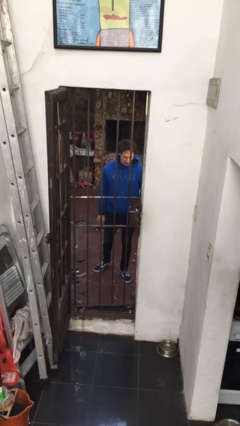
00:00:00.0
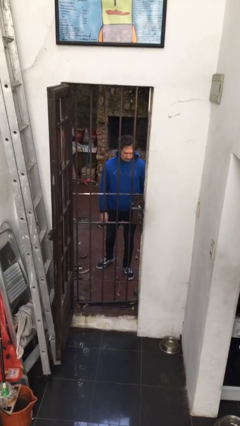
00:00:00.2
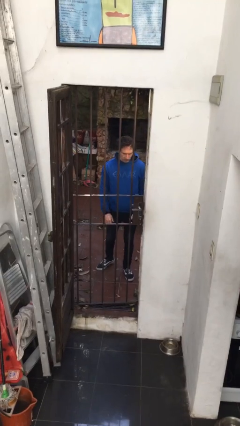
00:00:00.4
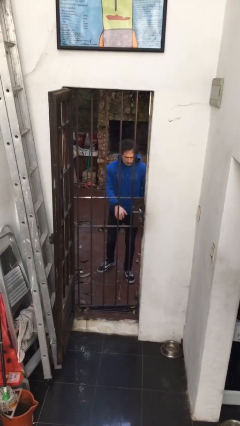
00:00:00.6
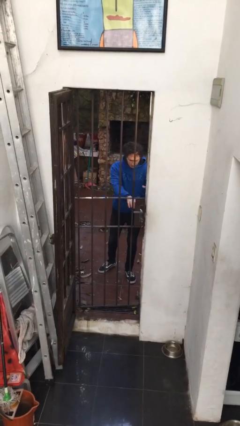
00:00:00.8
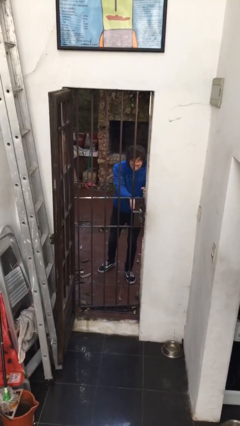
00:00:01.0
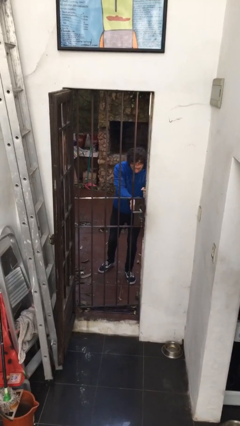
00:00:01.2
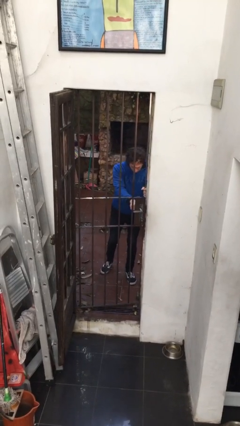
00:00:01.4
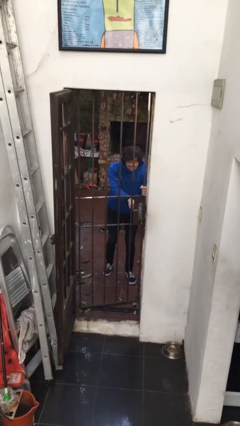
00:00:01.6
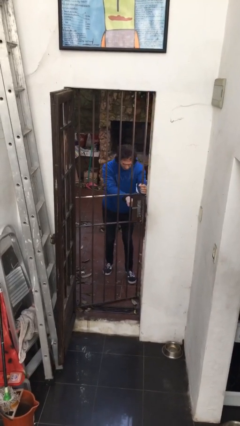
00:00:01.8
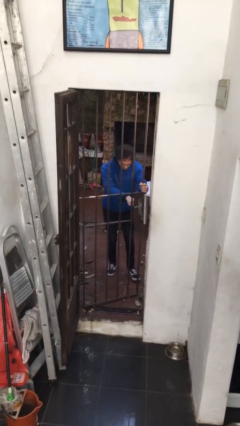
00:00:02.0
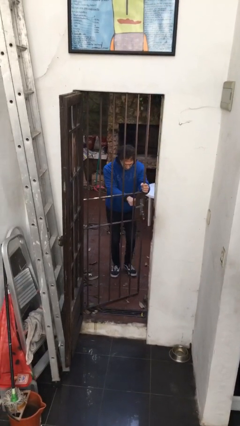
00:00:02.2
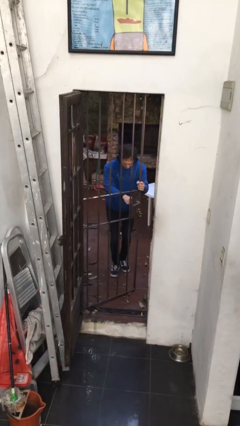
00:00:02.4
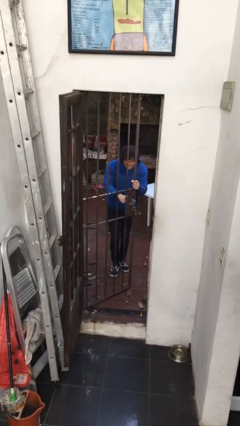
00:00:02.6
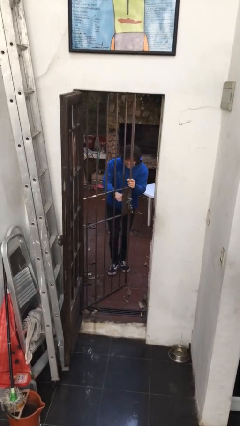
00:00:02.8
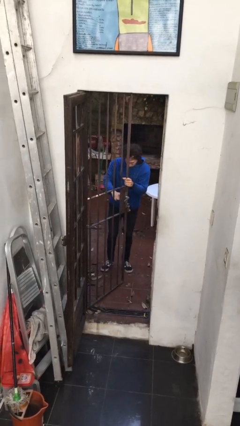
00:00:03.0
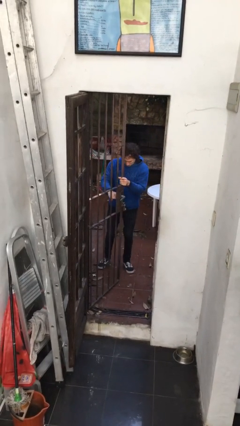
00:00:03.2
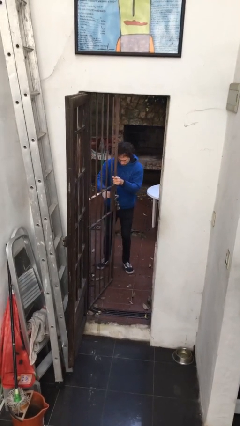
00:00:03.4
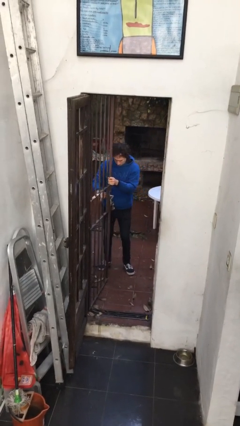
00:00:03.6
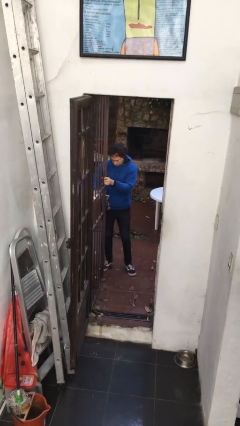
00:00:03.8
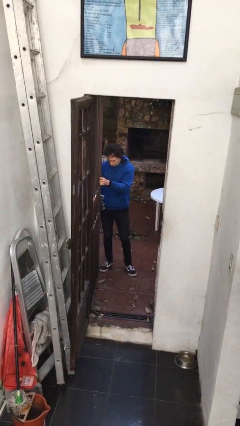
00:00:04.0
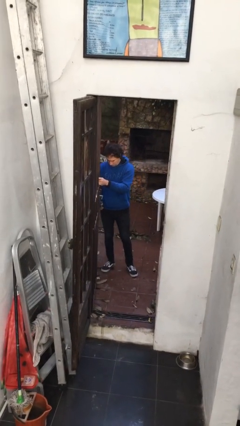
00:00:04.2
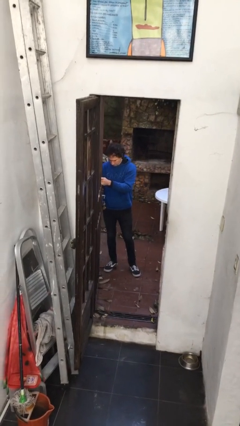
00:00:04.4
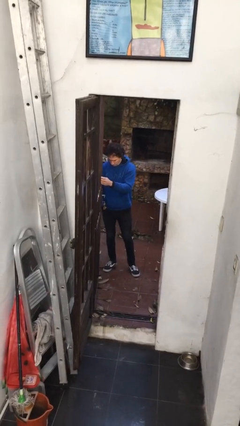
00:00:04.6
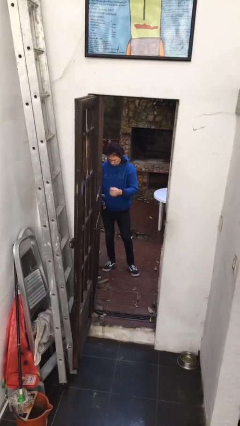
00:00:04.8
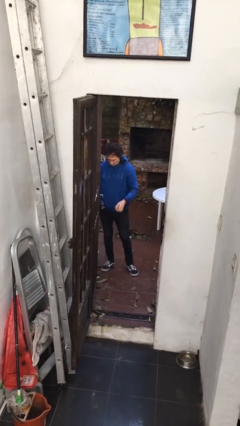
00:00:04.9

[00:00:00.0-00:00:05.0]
person opens gate

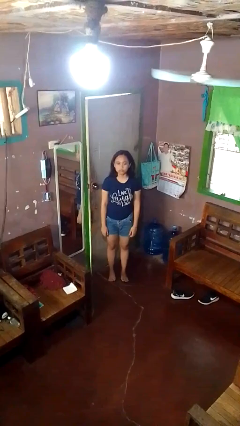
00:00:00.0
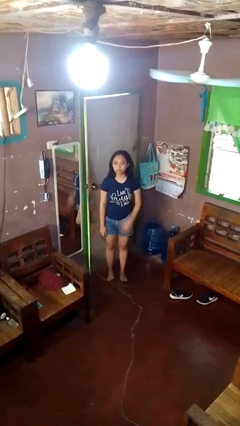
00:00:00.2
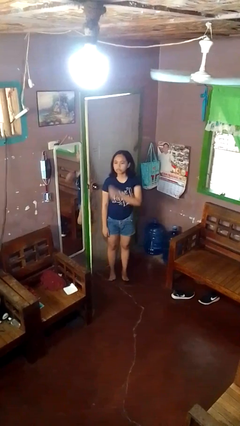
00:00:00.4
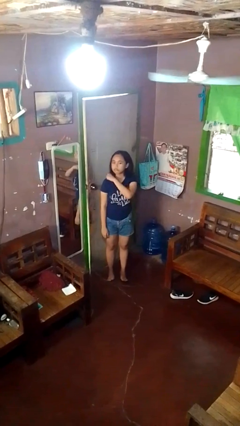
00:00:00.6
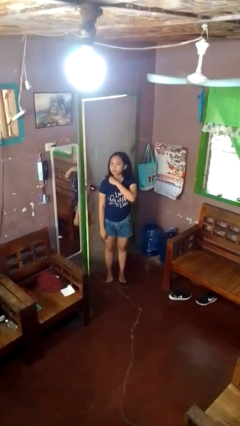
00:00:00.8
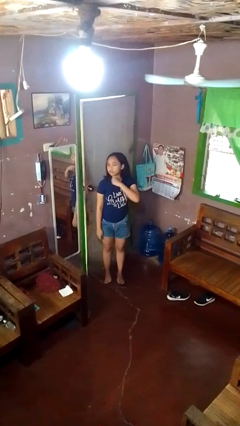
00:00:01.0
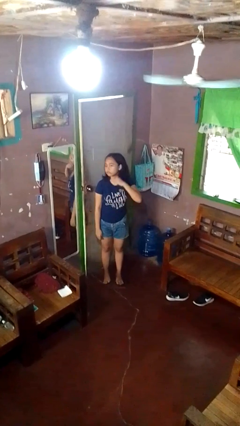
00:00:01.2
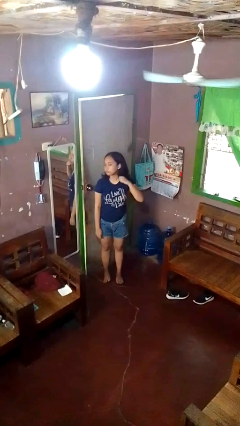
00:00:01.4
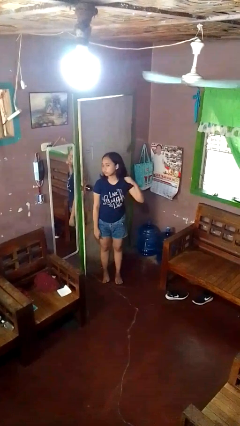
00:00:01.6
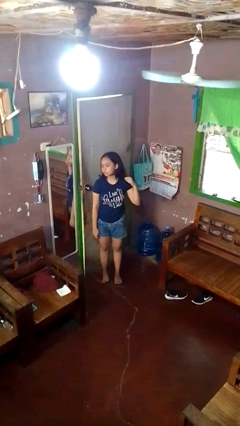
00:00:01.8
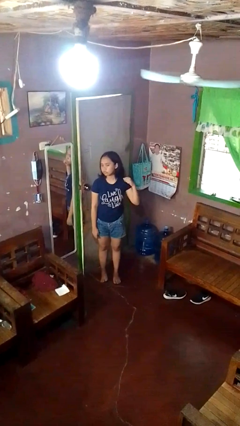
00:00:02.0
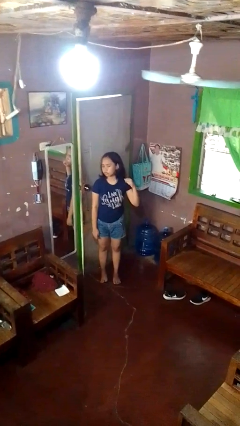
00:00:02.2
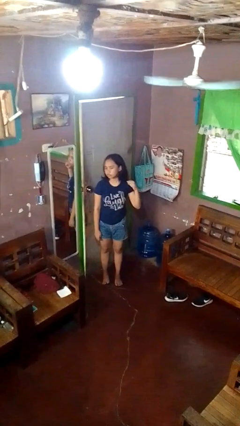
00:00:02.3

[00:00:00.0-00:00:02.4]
person gestures cut

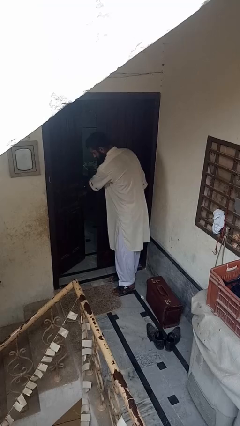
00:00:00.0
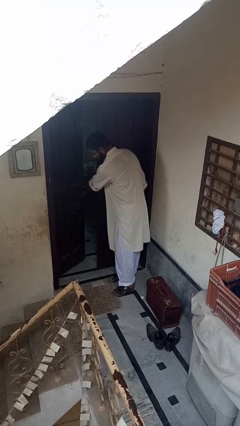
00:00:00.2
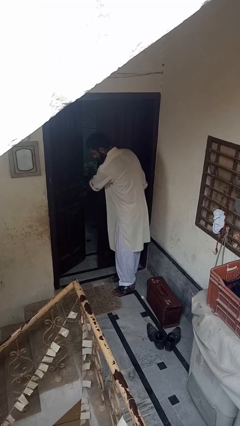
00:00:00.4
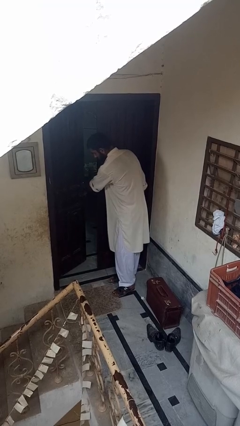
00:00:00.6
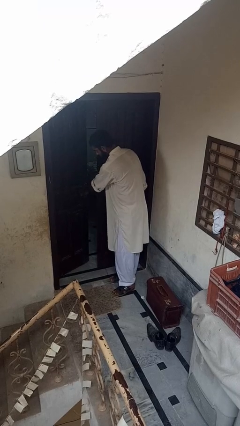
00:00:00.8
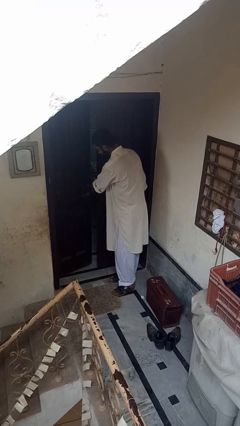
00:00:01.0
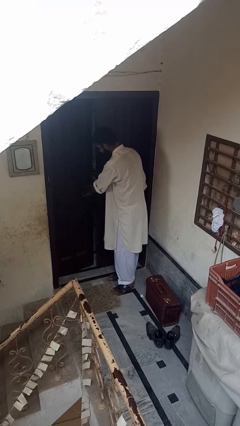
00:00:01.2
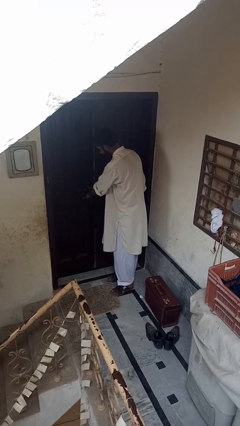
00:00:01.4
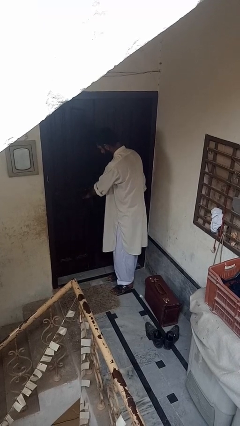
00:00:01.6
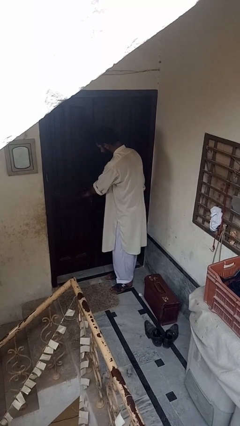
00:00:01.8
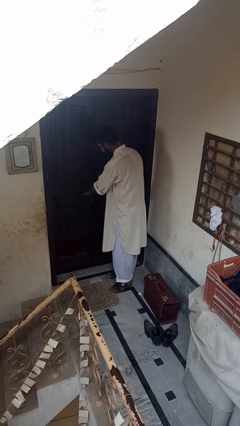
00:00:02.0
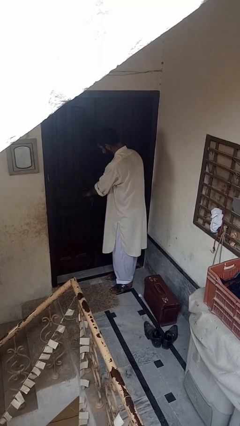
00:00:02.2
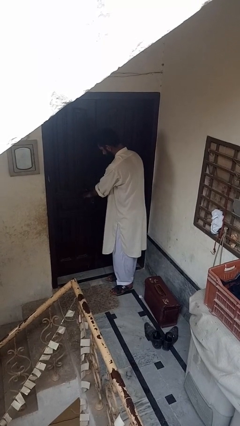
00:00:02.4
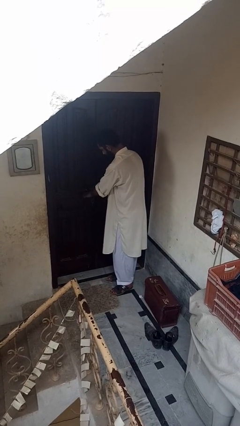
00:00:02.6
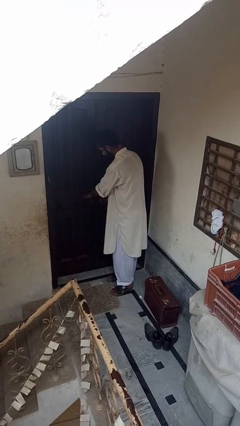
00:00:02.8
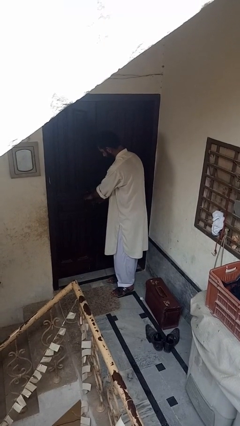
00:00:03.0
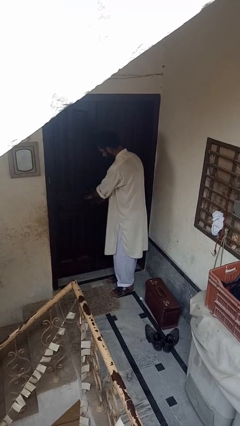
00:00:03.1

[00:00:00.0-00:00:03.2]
person closes facility door

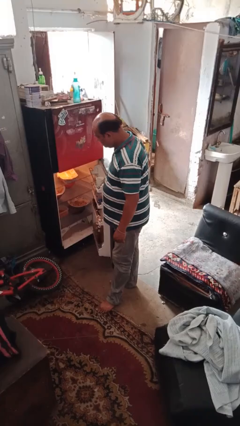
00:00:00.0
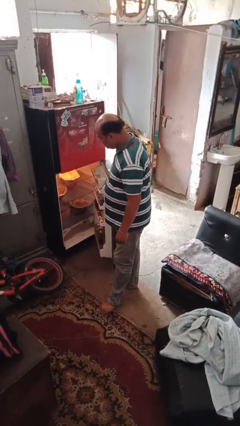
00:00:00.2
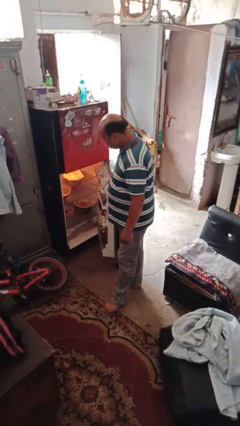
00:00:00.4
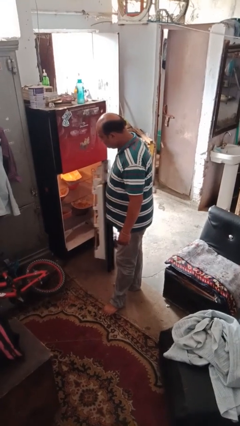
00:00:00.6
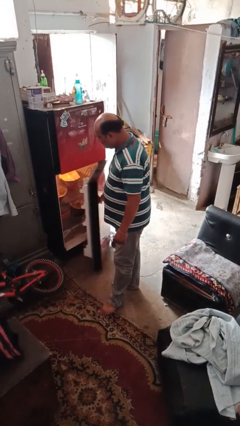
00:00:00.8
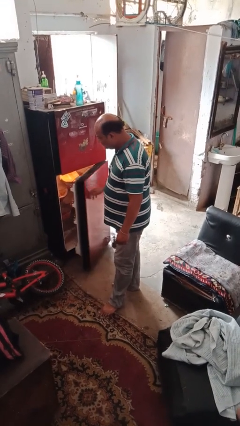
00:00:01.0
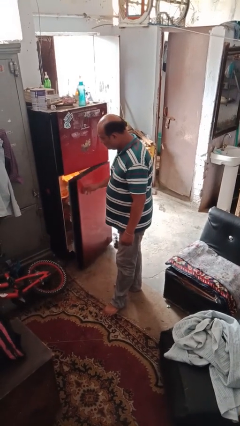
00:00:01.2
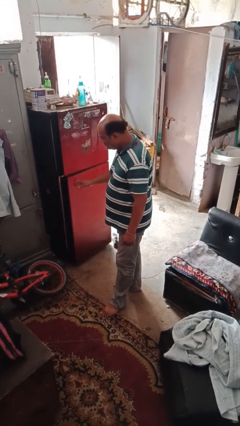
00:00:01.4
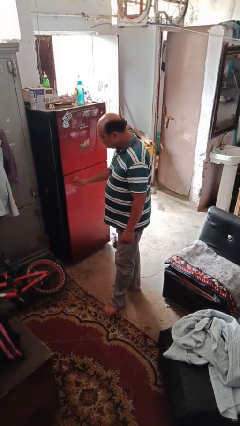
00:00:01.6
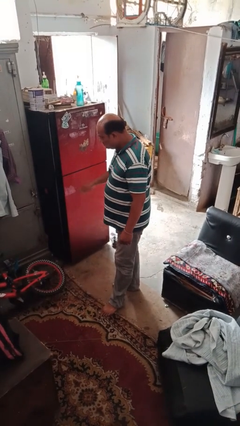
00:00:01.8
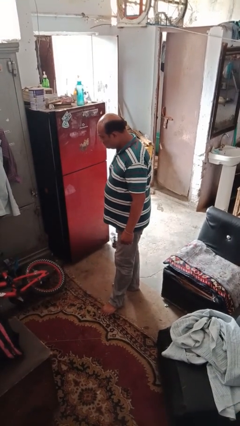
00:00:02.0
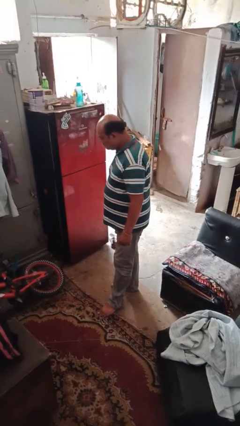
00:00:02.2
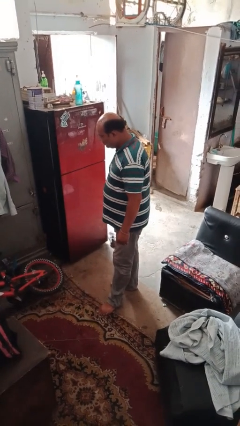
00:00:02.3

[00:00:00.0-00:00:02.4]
person closes refrigerator

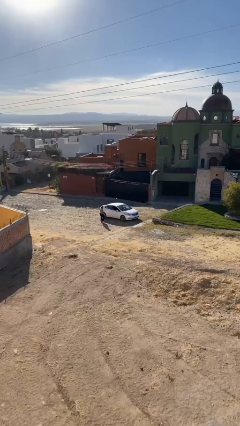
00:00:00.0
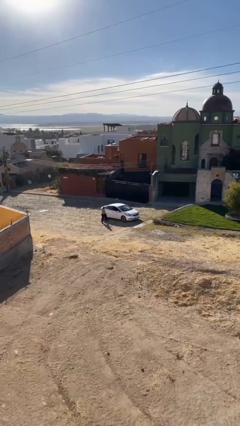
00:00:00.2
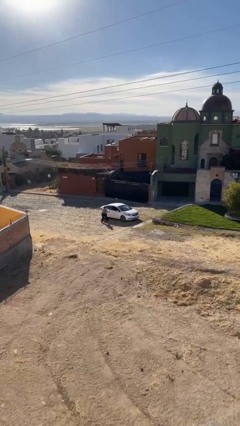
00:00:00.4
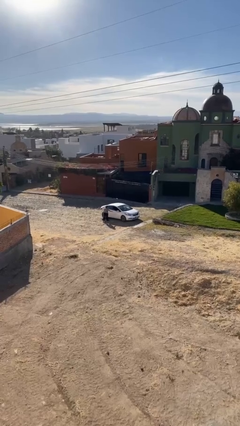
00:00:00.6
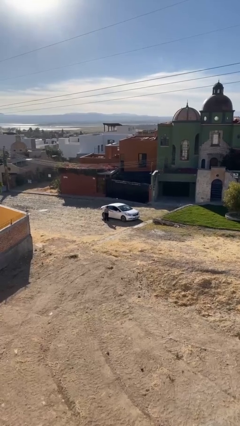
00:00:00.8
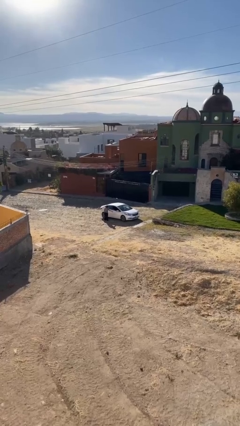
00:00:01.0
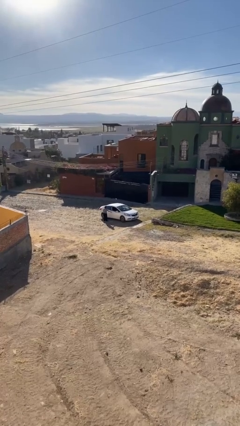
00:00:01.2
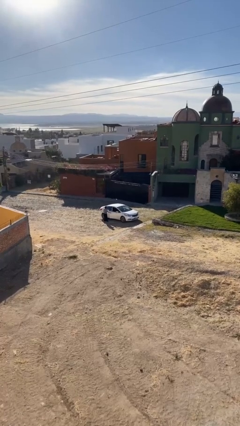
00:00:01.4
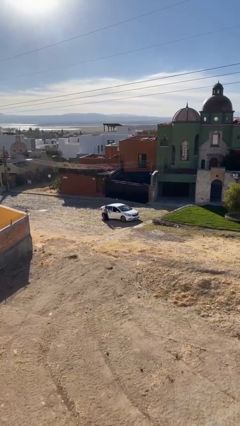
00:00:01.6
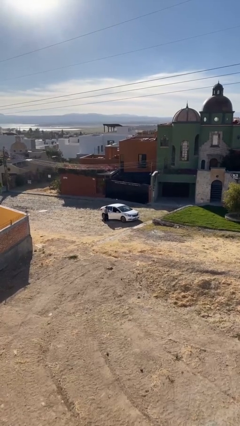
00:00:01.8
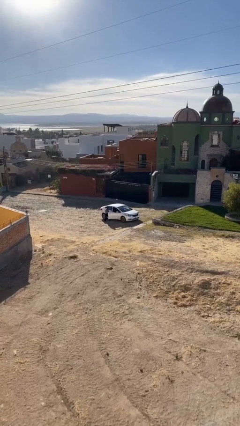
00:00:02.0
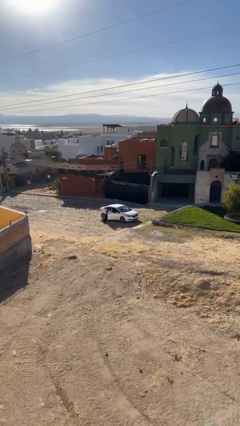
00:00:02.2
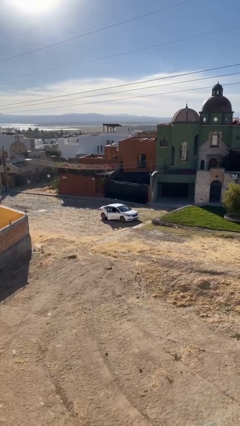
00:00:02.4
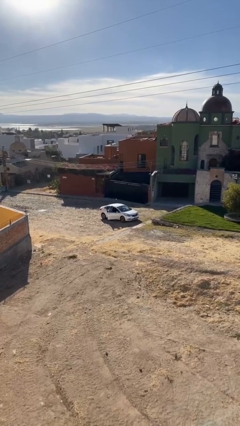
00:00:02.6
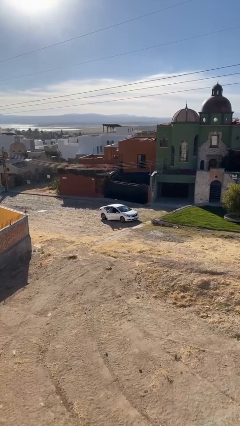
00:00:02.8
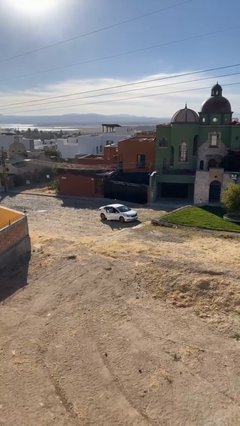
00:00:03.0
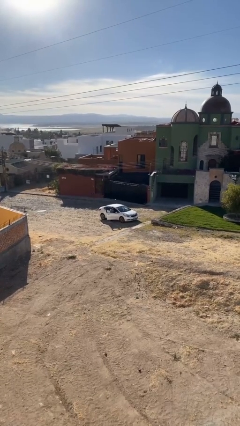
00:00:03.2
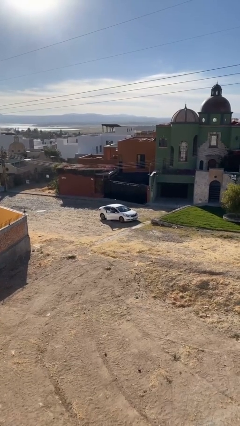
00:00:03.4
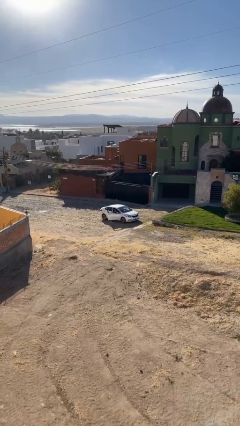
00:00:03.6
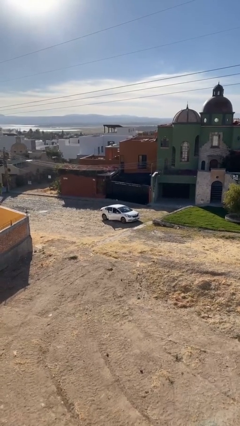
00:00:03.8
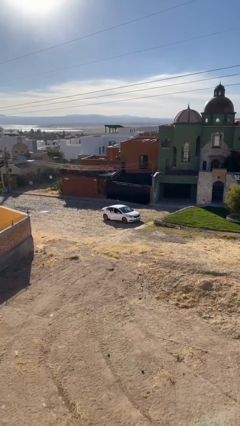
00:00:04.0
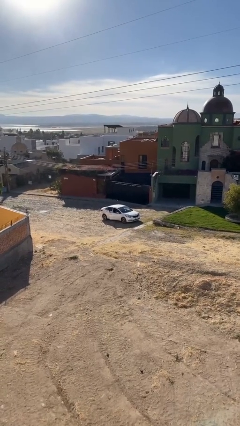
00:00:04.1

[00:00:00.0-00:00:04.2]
car picks up person

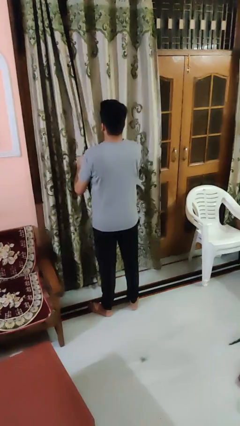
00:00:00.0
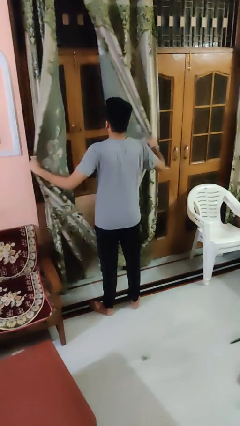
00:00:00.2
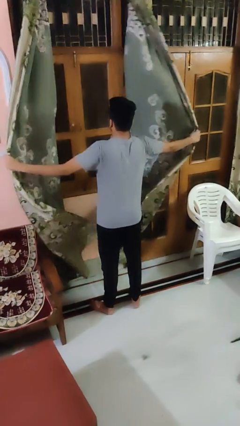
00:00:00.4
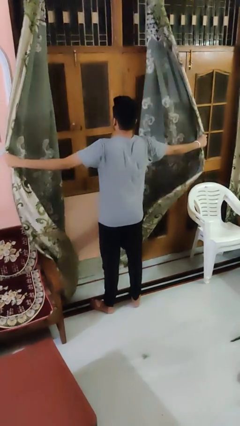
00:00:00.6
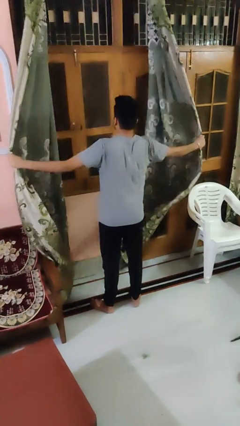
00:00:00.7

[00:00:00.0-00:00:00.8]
person opens curtains
